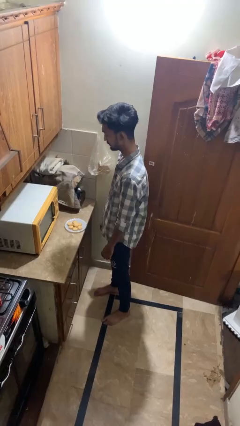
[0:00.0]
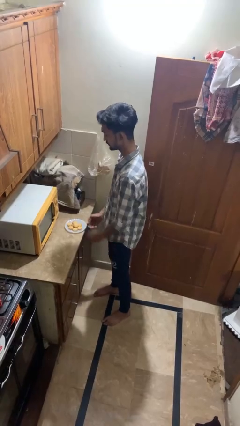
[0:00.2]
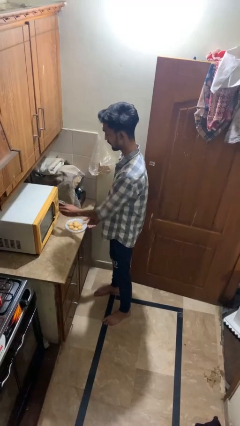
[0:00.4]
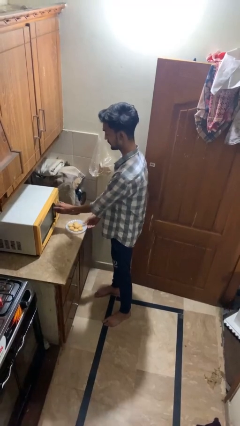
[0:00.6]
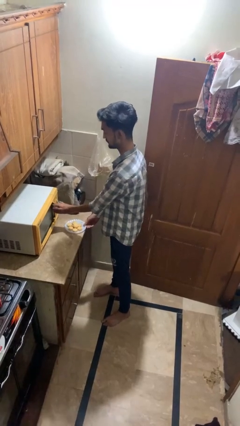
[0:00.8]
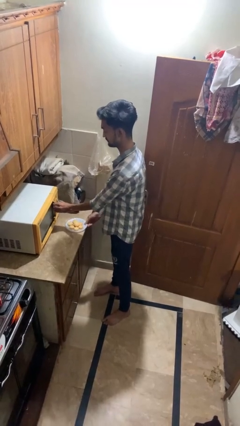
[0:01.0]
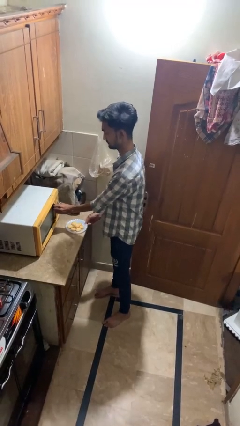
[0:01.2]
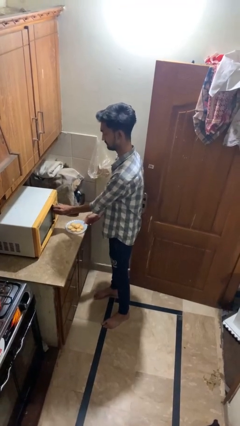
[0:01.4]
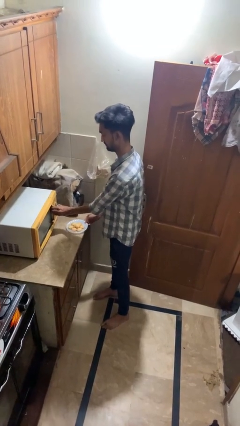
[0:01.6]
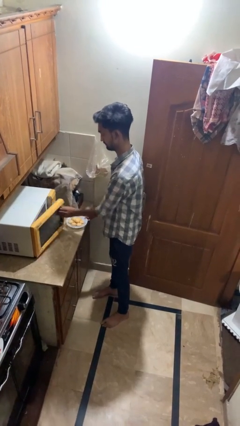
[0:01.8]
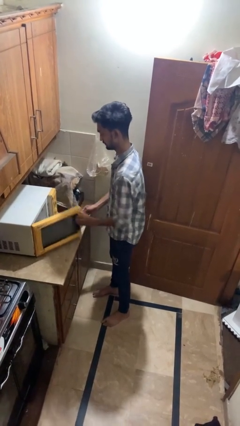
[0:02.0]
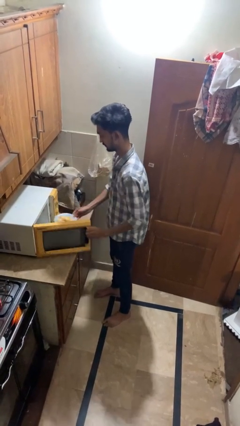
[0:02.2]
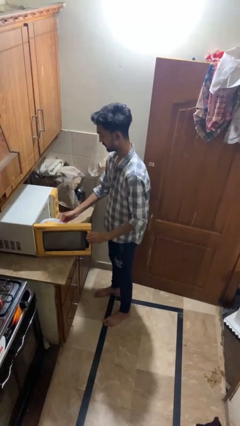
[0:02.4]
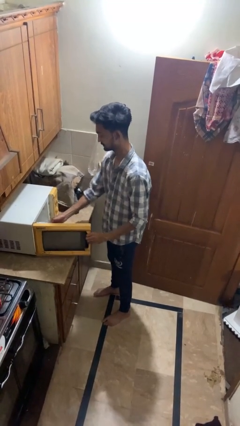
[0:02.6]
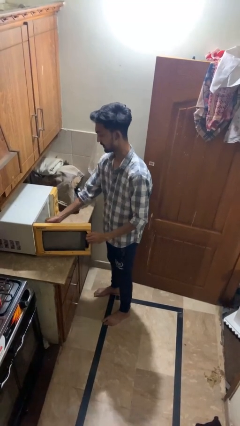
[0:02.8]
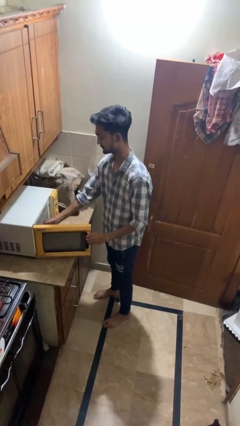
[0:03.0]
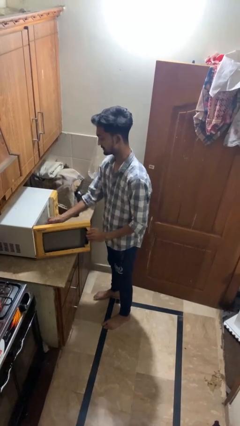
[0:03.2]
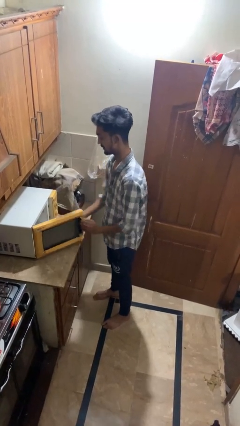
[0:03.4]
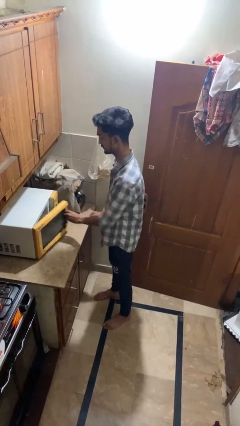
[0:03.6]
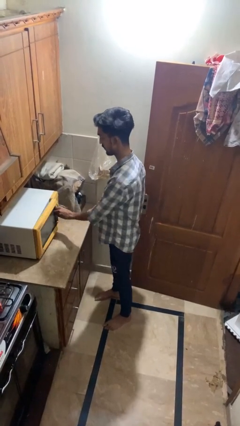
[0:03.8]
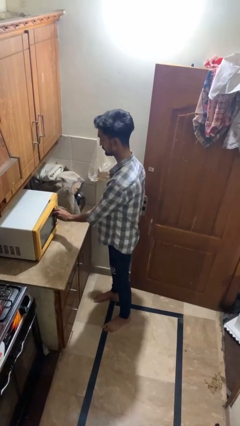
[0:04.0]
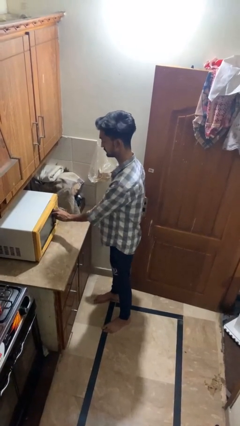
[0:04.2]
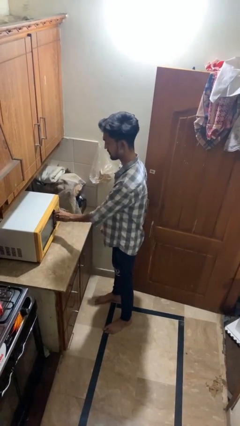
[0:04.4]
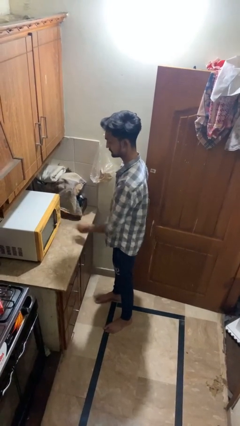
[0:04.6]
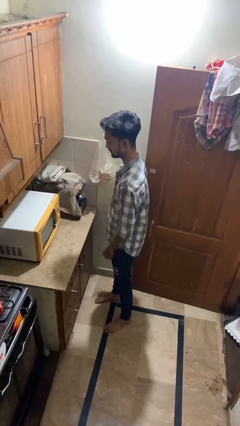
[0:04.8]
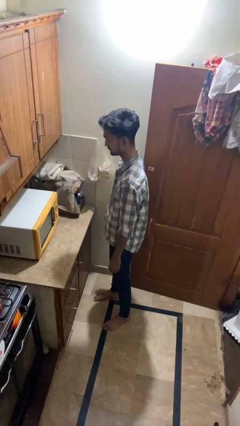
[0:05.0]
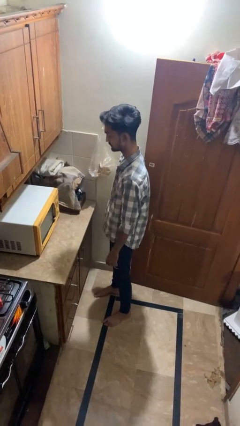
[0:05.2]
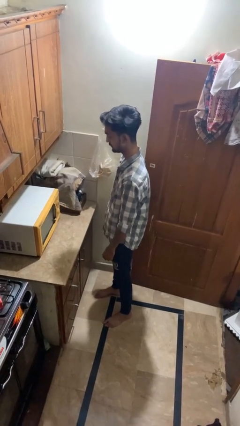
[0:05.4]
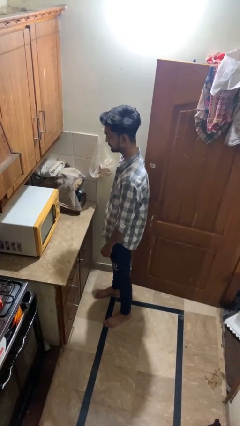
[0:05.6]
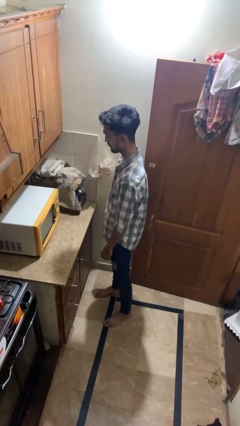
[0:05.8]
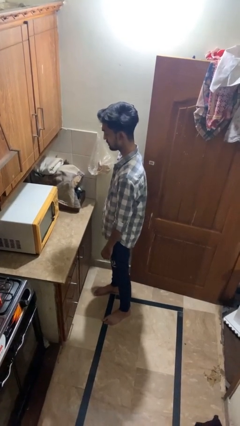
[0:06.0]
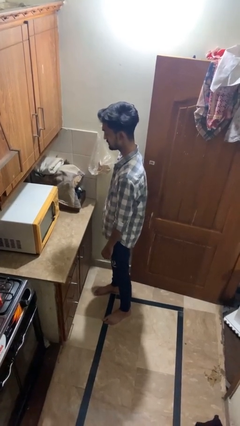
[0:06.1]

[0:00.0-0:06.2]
person puts object into microwave

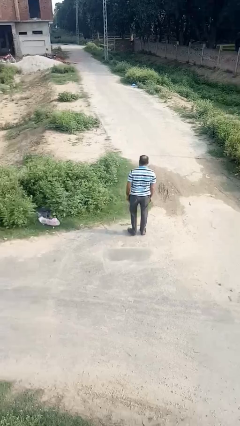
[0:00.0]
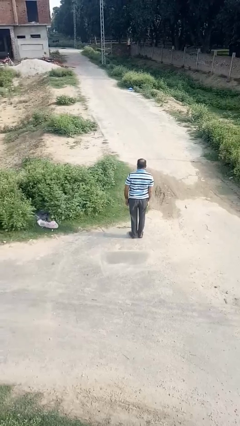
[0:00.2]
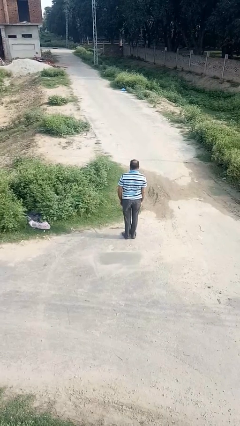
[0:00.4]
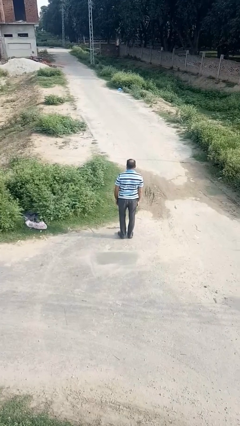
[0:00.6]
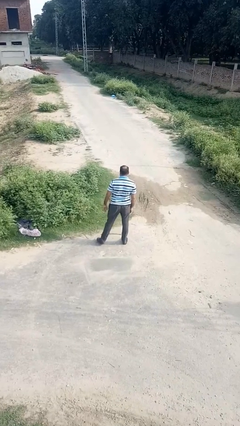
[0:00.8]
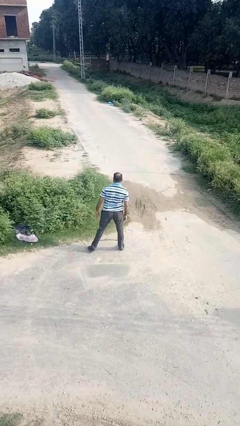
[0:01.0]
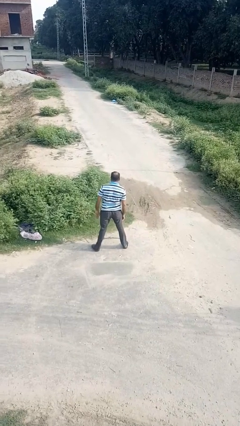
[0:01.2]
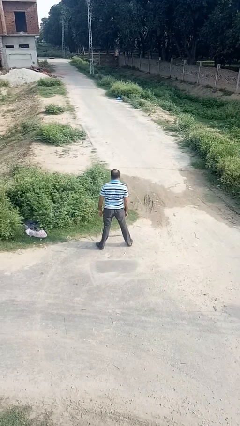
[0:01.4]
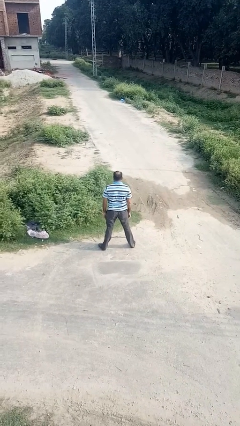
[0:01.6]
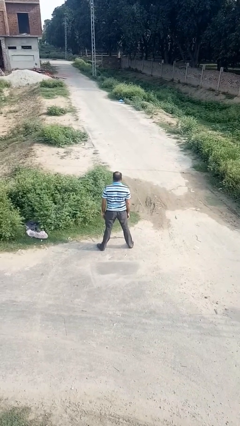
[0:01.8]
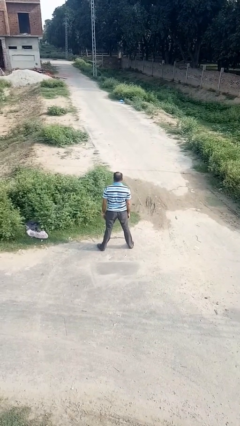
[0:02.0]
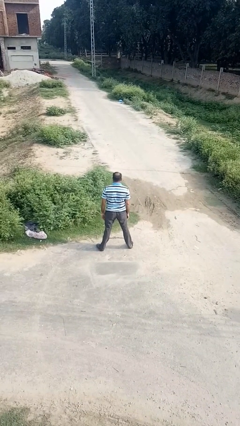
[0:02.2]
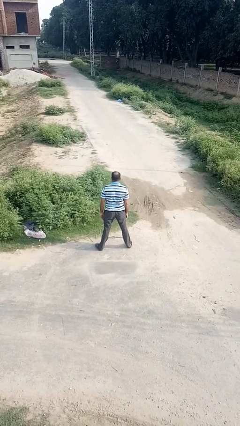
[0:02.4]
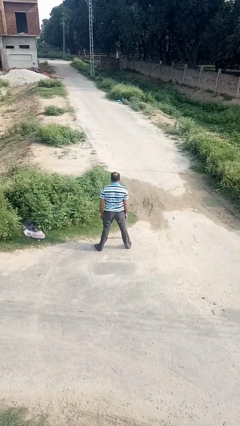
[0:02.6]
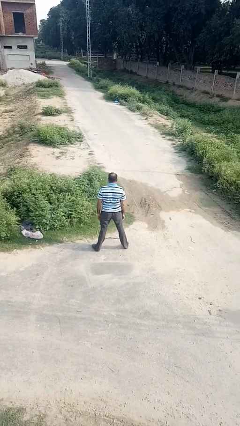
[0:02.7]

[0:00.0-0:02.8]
person stretches back

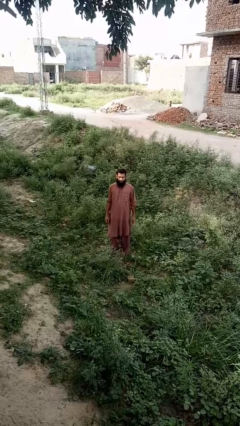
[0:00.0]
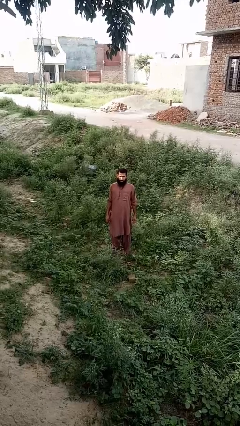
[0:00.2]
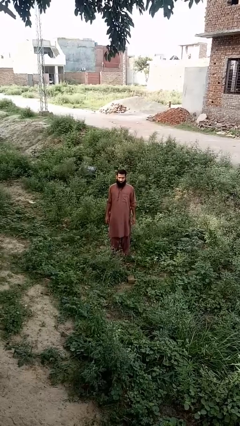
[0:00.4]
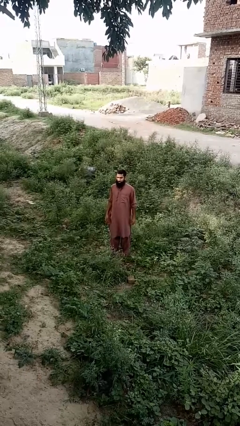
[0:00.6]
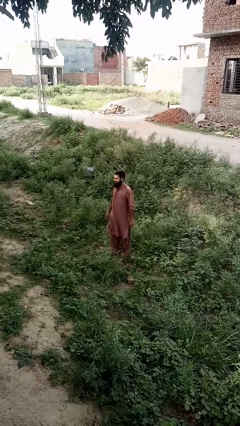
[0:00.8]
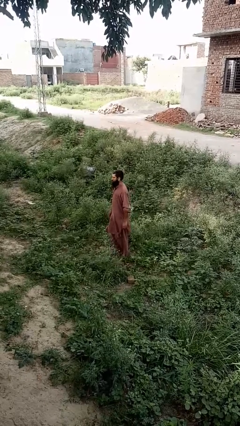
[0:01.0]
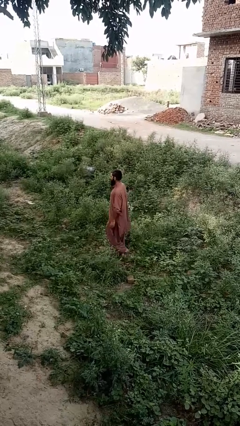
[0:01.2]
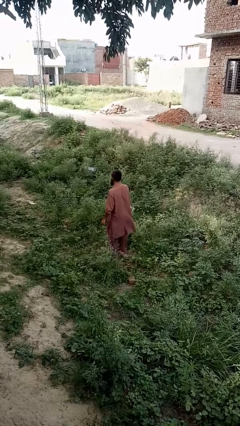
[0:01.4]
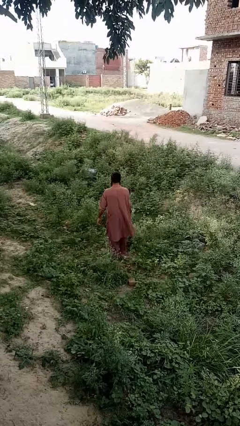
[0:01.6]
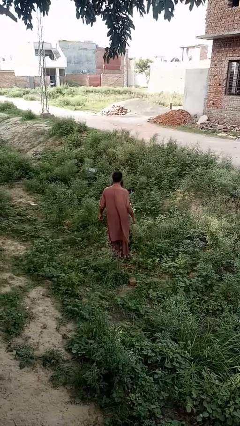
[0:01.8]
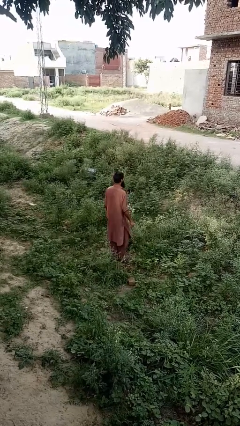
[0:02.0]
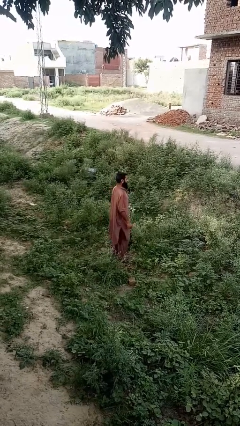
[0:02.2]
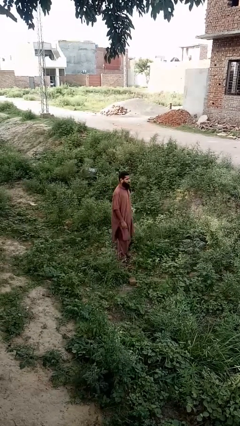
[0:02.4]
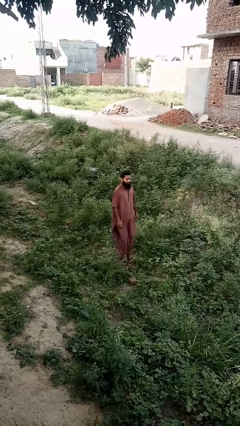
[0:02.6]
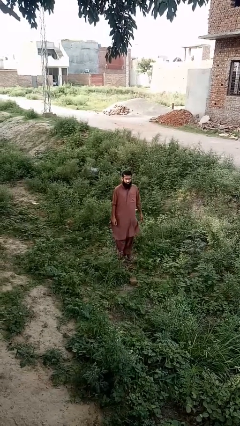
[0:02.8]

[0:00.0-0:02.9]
person twirls

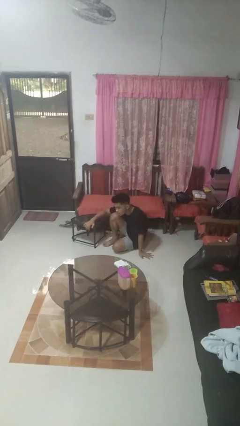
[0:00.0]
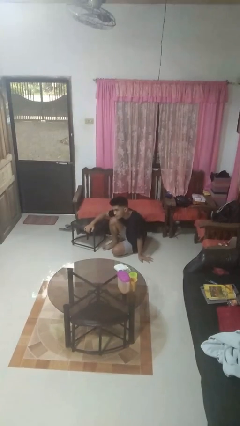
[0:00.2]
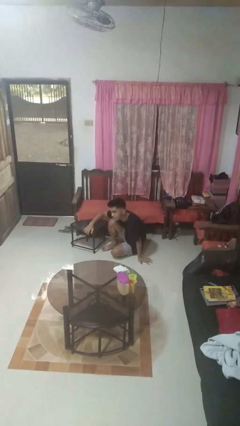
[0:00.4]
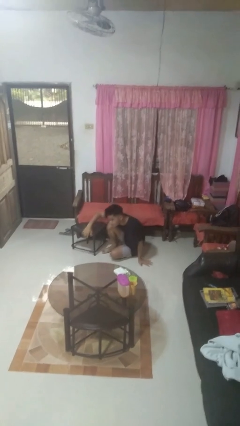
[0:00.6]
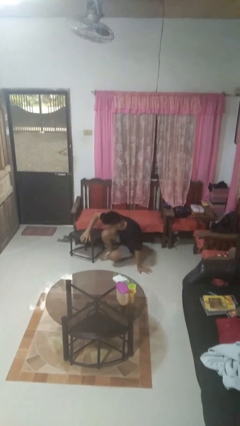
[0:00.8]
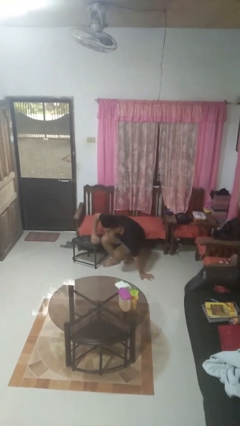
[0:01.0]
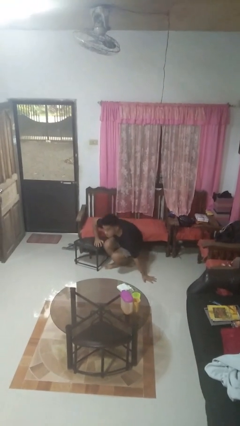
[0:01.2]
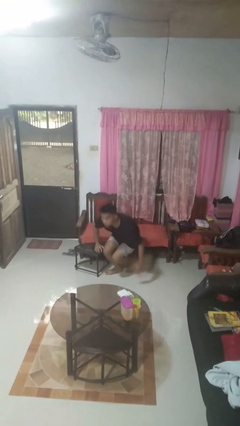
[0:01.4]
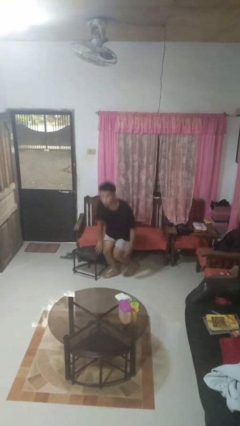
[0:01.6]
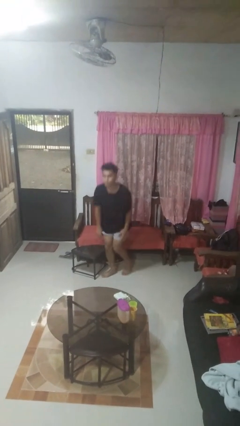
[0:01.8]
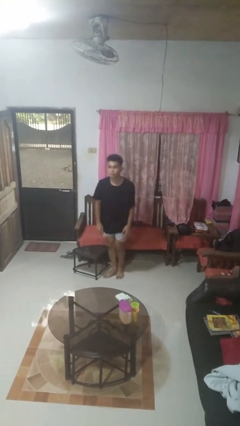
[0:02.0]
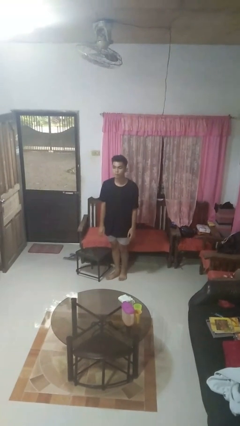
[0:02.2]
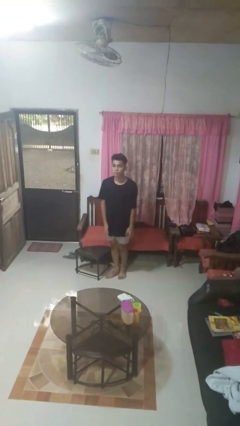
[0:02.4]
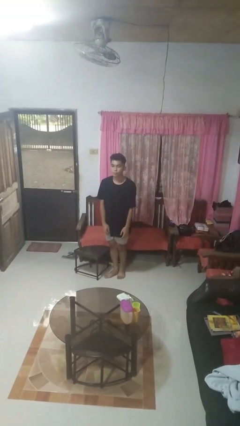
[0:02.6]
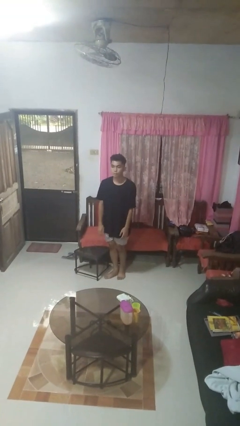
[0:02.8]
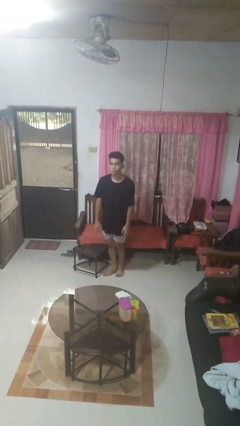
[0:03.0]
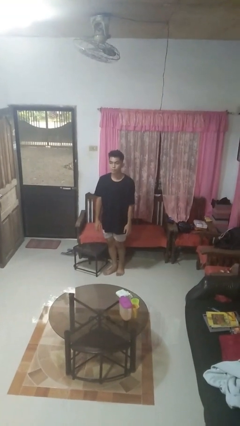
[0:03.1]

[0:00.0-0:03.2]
person stands up from floor

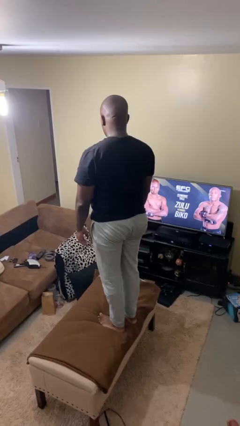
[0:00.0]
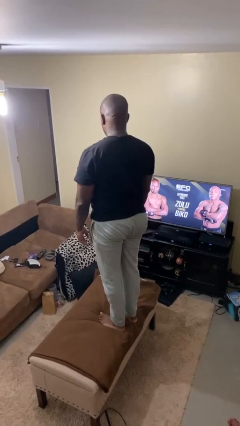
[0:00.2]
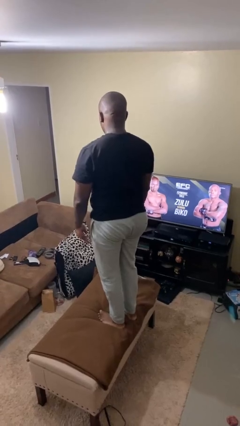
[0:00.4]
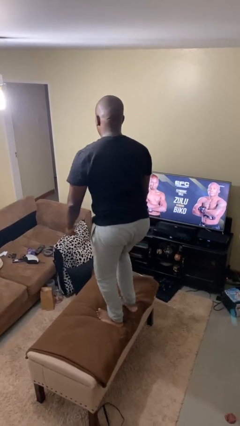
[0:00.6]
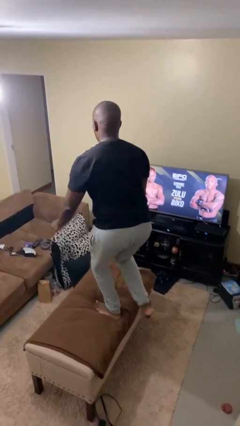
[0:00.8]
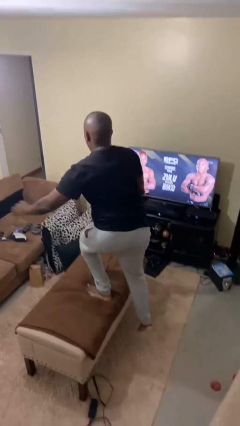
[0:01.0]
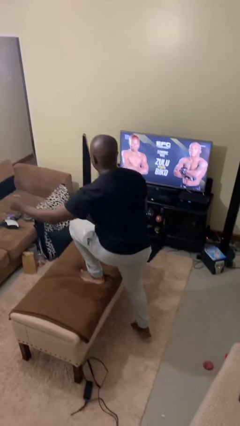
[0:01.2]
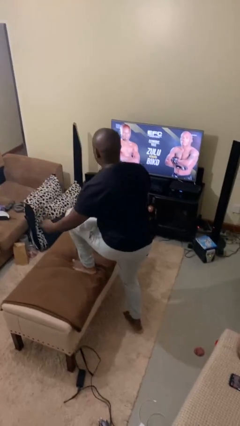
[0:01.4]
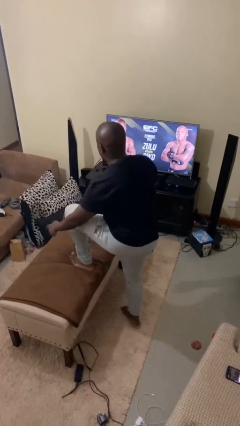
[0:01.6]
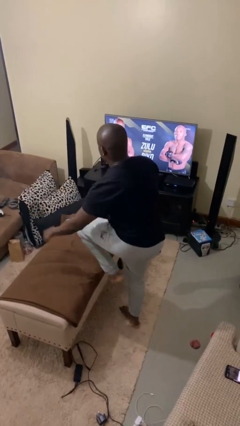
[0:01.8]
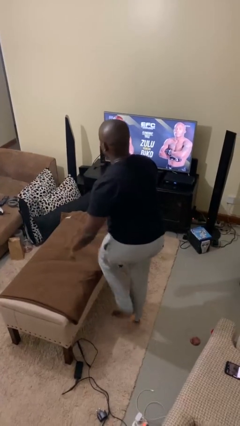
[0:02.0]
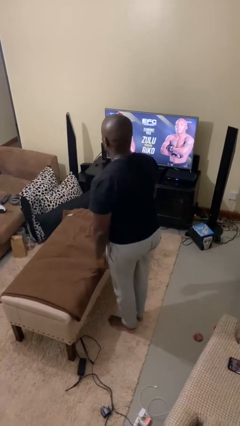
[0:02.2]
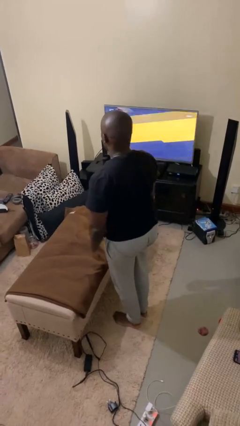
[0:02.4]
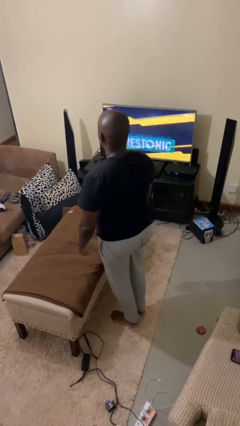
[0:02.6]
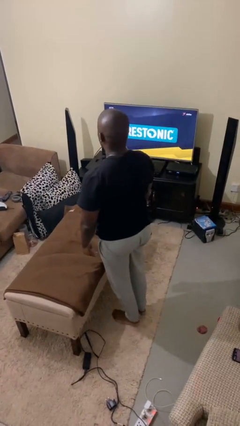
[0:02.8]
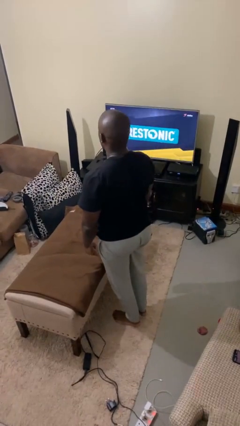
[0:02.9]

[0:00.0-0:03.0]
person climbs off table
